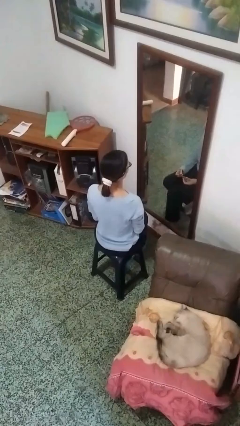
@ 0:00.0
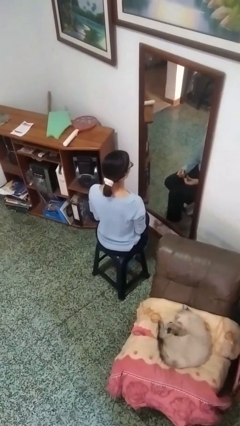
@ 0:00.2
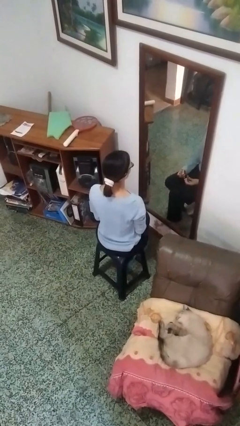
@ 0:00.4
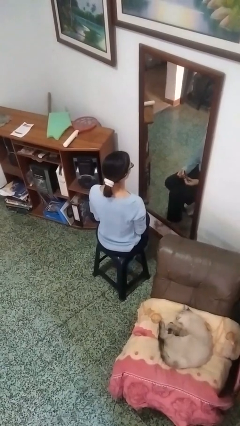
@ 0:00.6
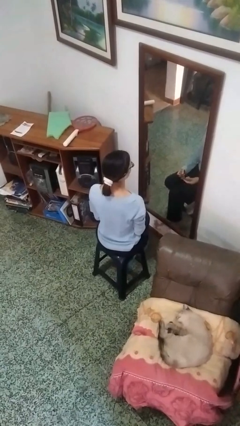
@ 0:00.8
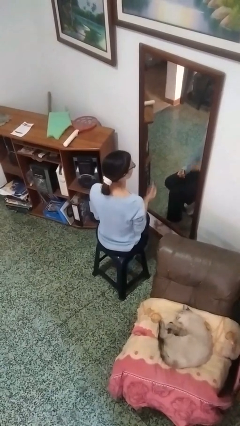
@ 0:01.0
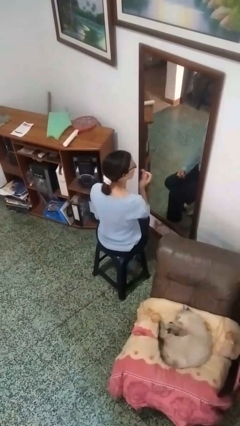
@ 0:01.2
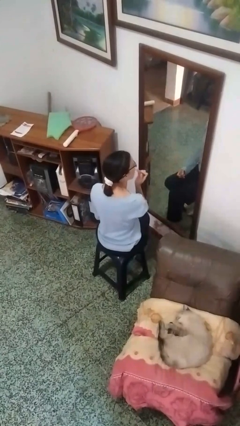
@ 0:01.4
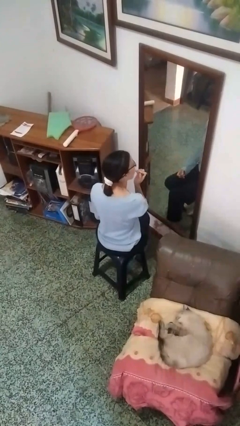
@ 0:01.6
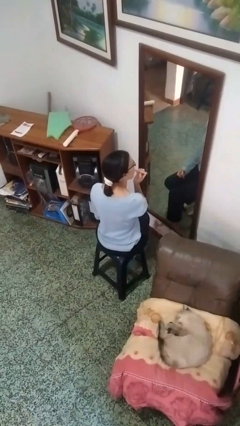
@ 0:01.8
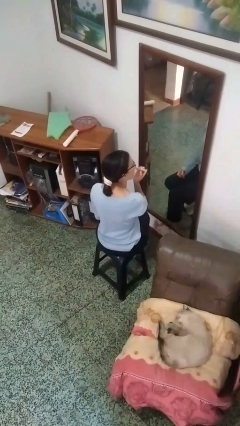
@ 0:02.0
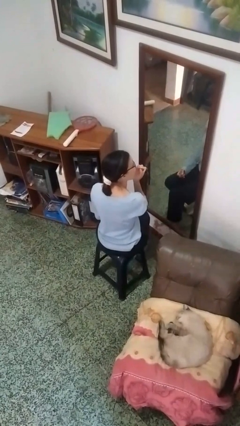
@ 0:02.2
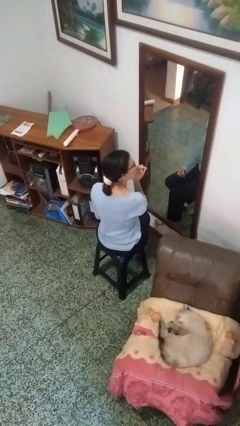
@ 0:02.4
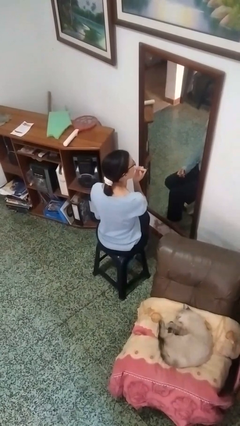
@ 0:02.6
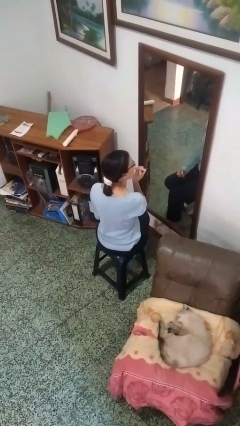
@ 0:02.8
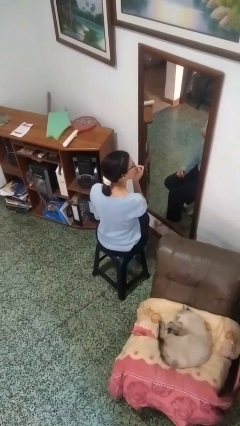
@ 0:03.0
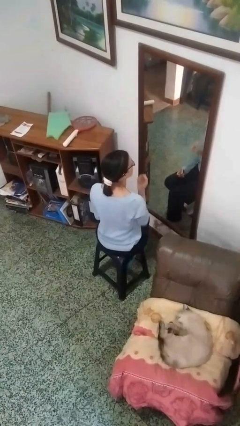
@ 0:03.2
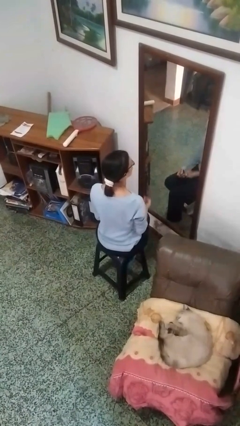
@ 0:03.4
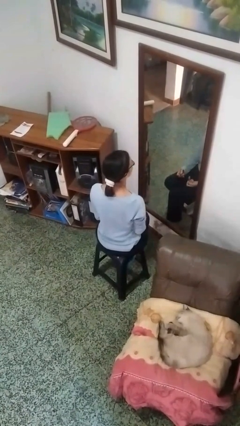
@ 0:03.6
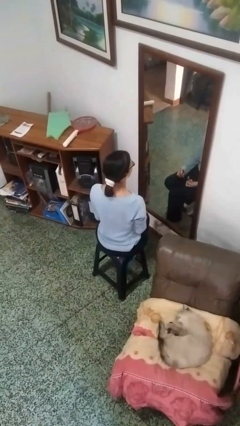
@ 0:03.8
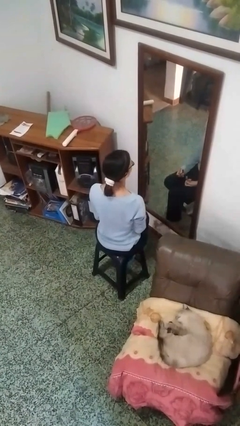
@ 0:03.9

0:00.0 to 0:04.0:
person applies lip makeup

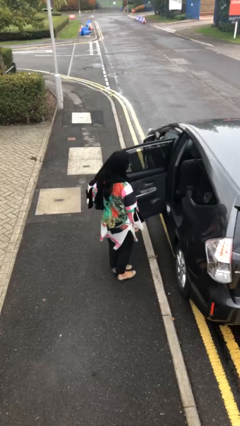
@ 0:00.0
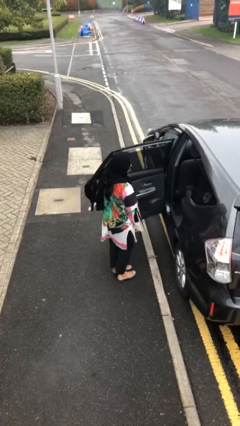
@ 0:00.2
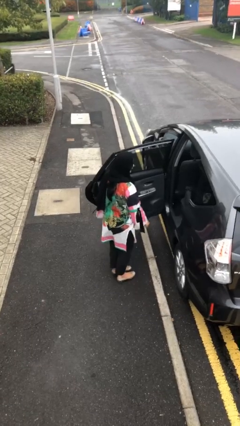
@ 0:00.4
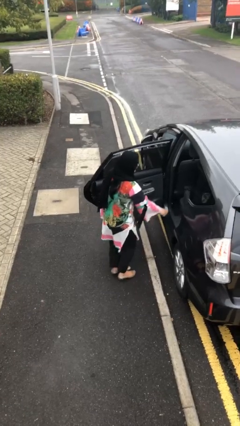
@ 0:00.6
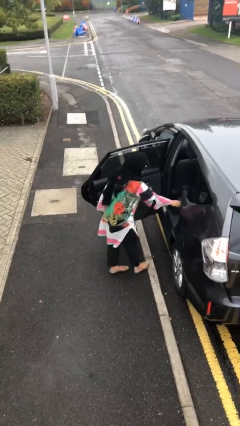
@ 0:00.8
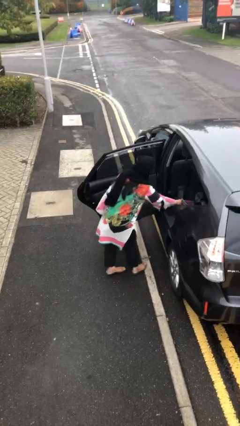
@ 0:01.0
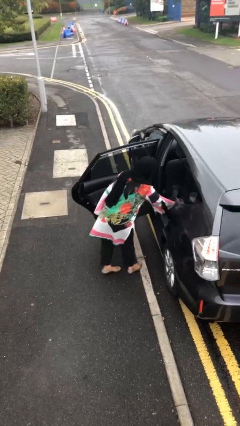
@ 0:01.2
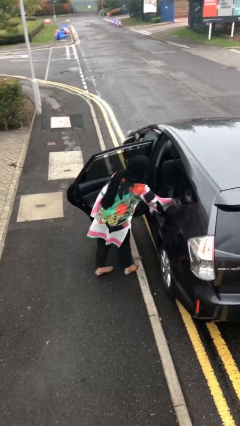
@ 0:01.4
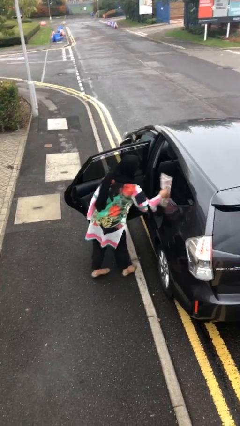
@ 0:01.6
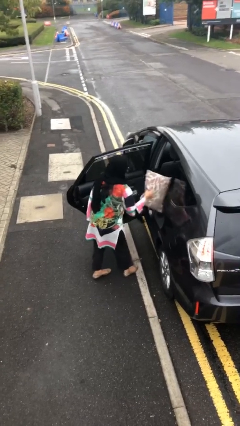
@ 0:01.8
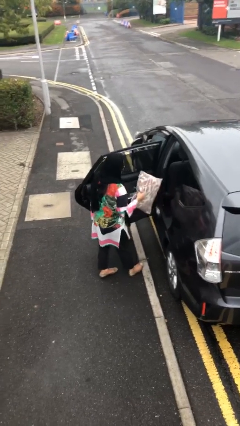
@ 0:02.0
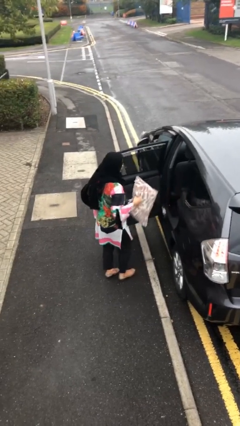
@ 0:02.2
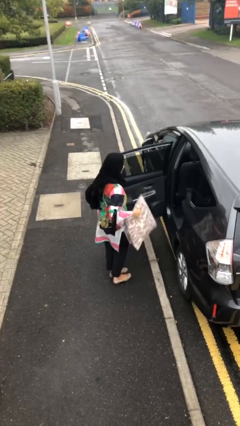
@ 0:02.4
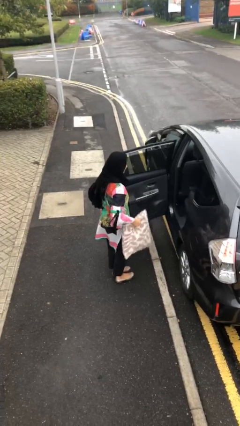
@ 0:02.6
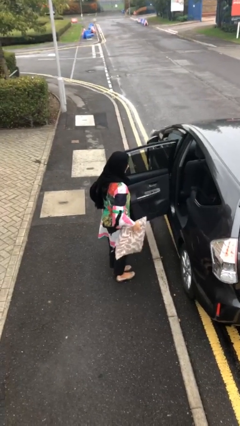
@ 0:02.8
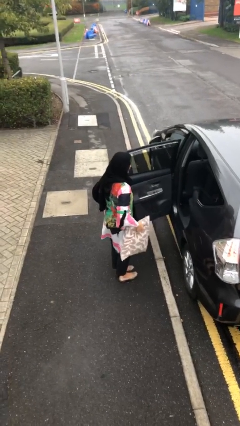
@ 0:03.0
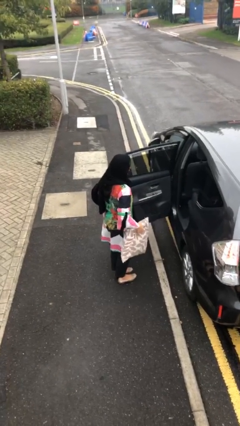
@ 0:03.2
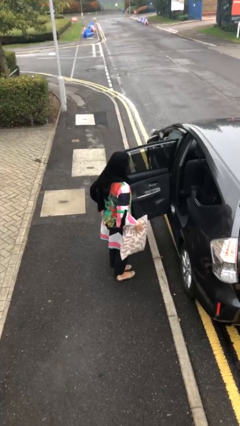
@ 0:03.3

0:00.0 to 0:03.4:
person unloads car

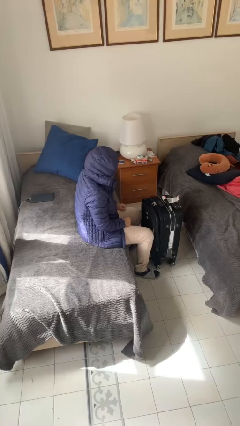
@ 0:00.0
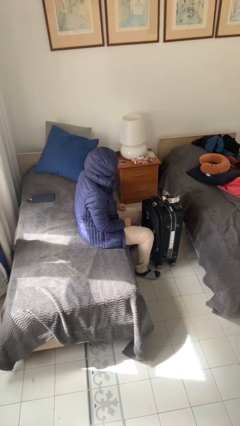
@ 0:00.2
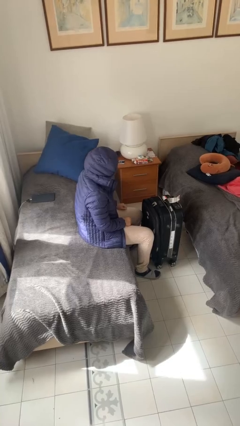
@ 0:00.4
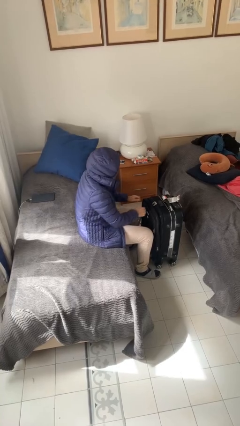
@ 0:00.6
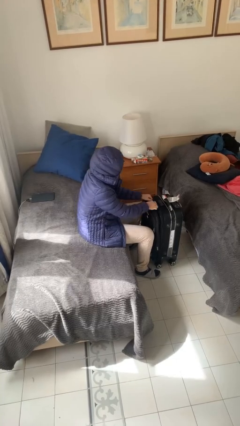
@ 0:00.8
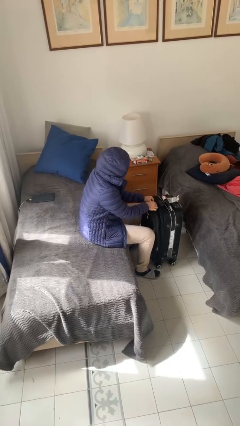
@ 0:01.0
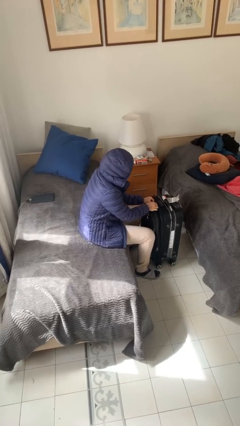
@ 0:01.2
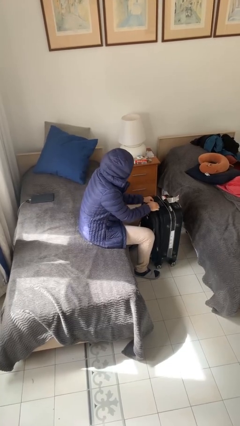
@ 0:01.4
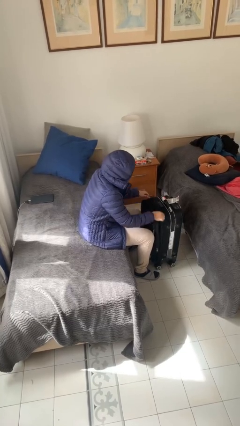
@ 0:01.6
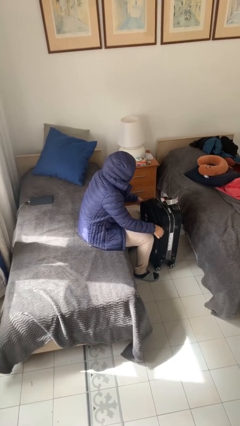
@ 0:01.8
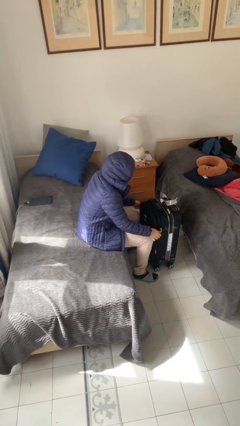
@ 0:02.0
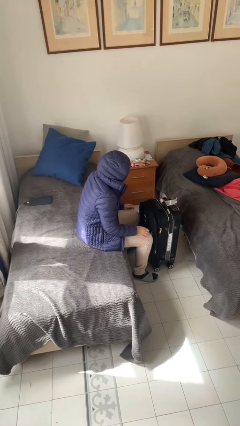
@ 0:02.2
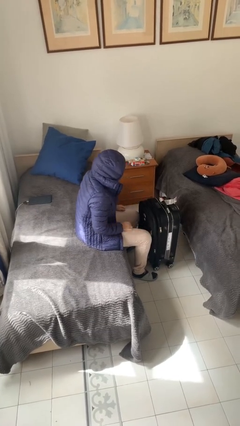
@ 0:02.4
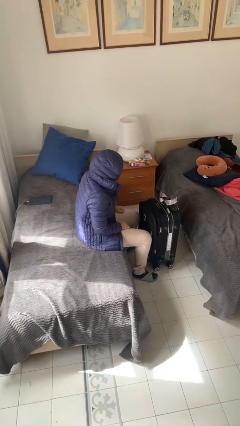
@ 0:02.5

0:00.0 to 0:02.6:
person opens suitcase

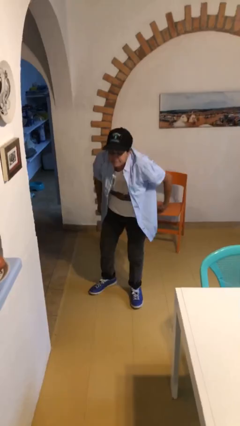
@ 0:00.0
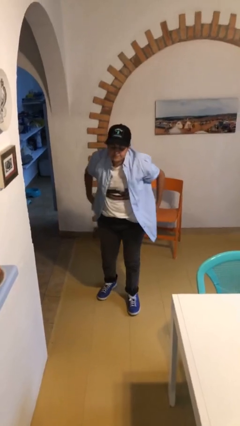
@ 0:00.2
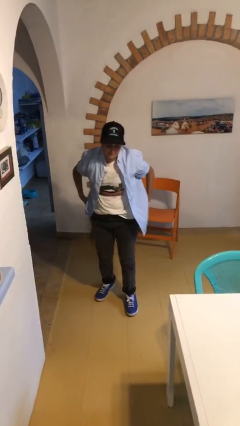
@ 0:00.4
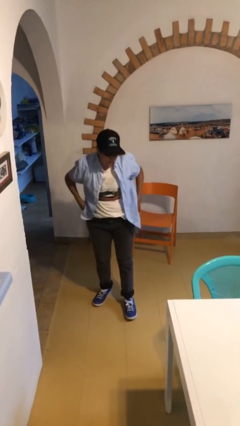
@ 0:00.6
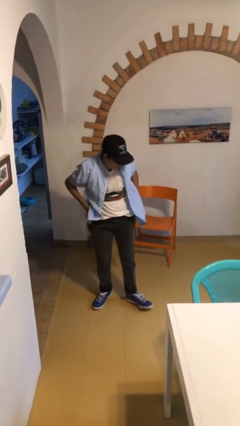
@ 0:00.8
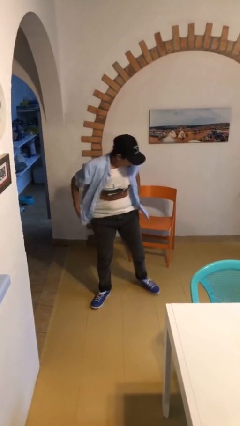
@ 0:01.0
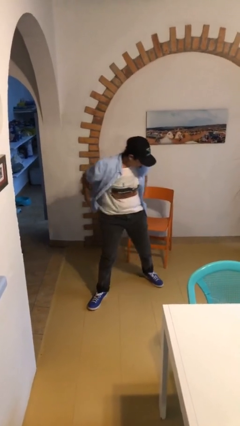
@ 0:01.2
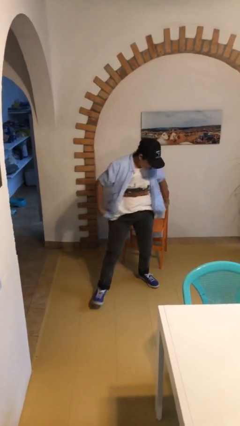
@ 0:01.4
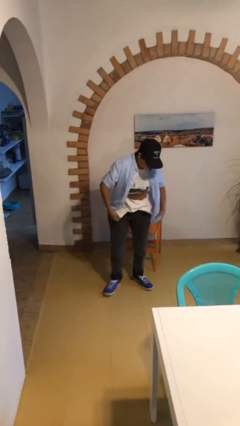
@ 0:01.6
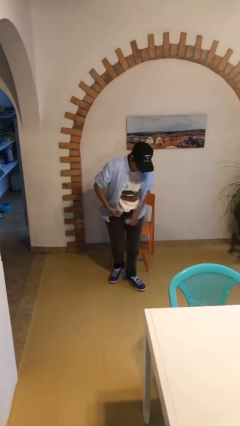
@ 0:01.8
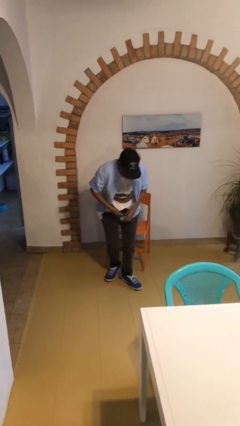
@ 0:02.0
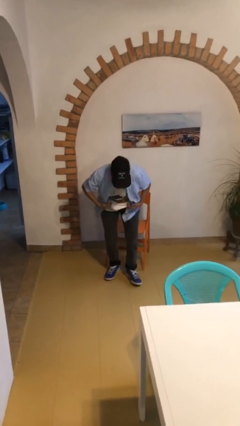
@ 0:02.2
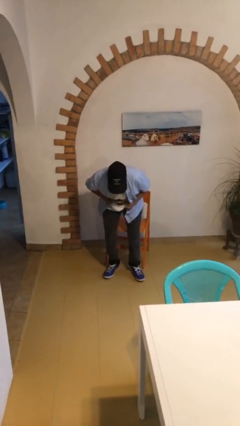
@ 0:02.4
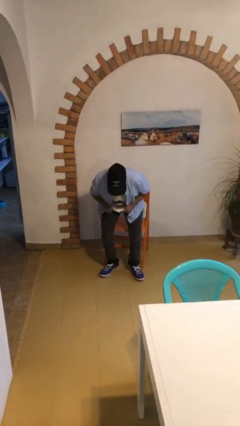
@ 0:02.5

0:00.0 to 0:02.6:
person stands up from floor

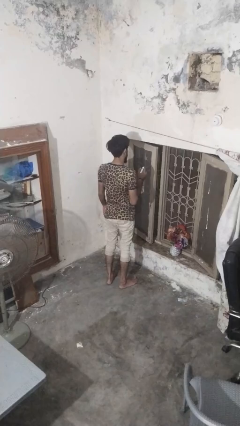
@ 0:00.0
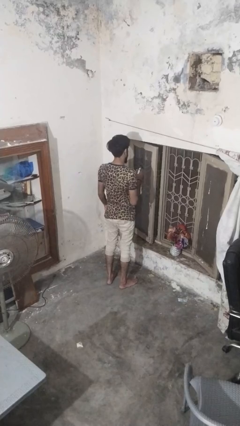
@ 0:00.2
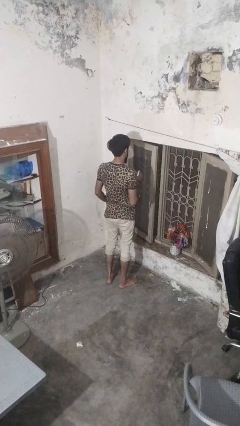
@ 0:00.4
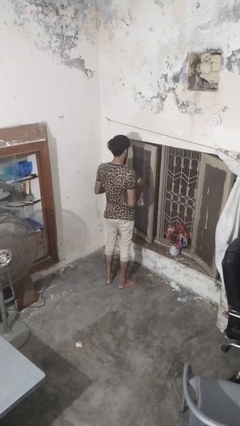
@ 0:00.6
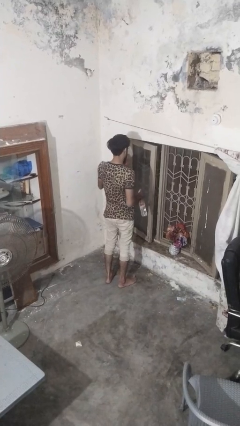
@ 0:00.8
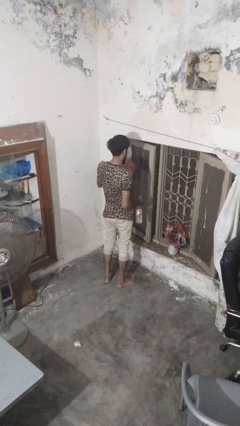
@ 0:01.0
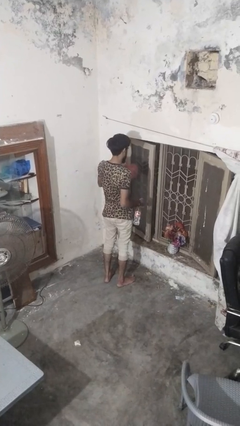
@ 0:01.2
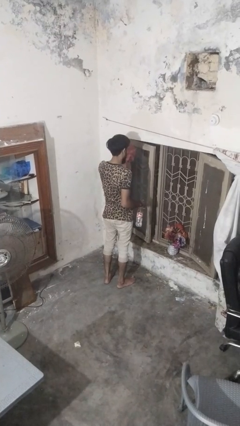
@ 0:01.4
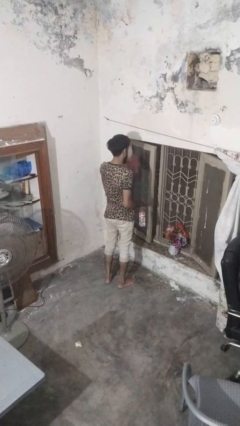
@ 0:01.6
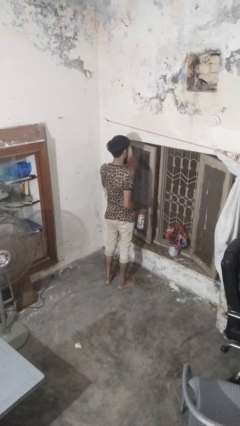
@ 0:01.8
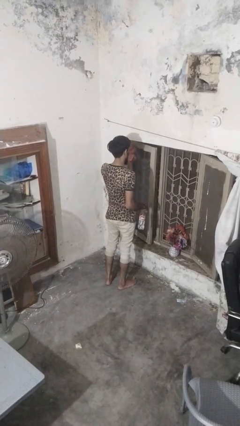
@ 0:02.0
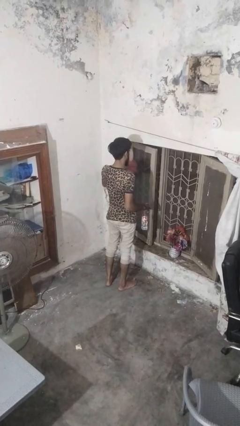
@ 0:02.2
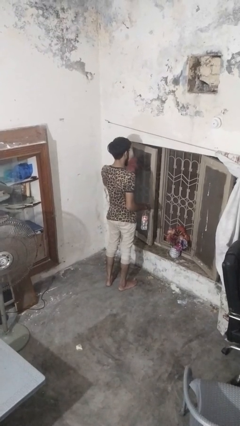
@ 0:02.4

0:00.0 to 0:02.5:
person washes window

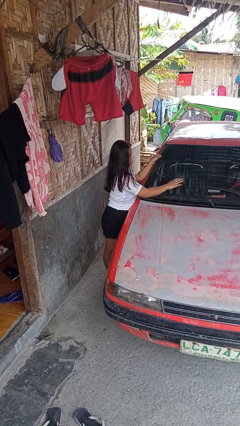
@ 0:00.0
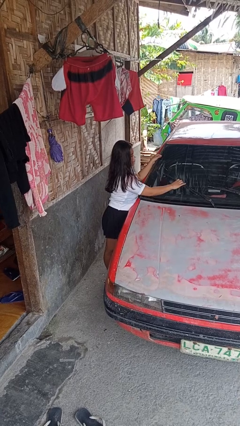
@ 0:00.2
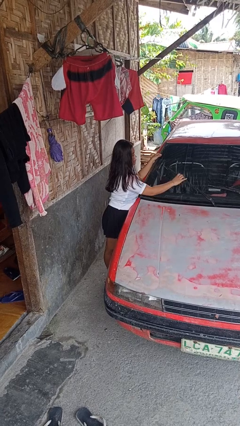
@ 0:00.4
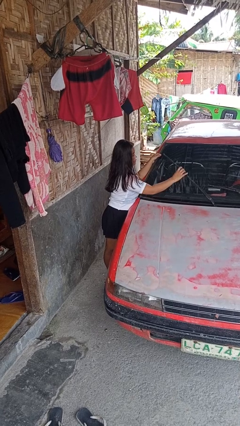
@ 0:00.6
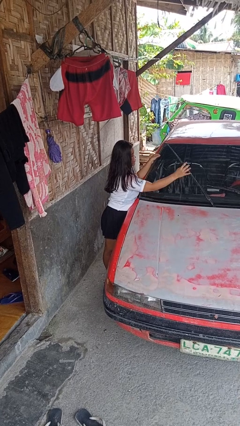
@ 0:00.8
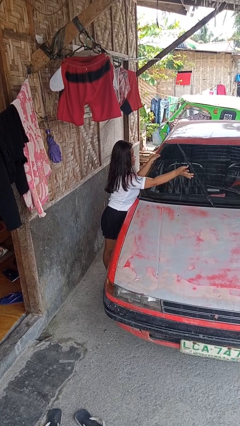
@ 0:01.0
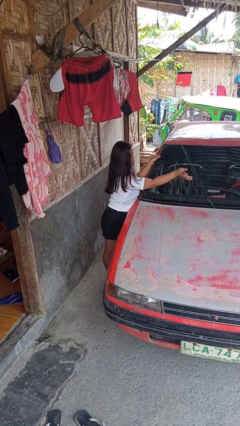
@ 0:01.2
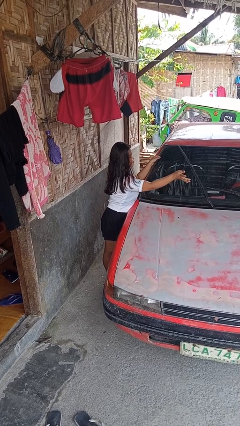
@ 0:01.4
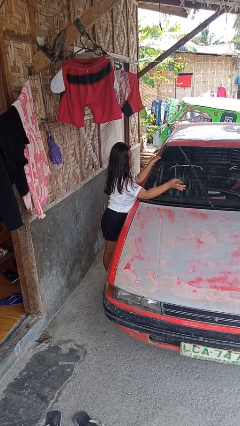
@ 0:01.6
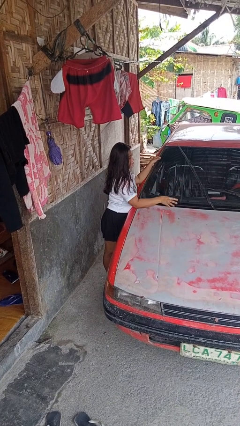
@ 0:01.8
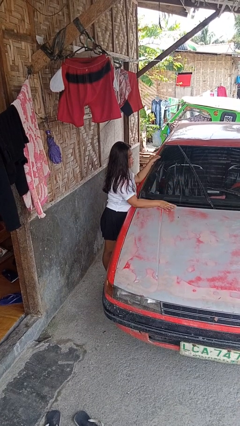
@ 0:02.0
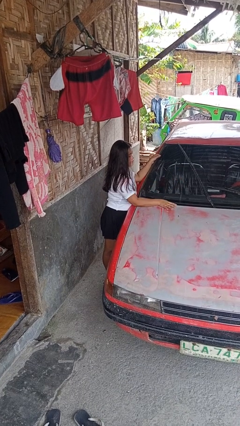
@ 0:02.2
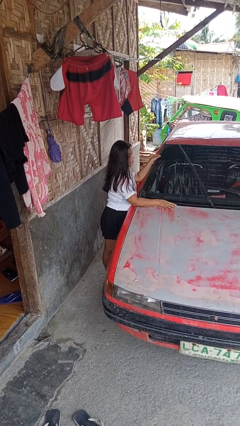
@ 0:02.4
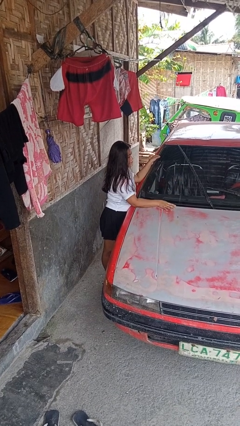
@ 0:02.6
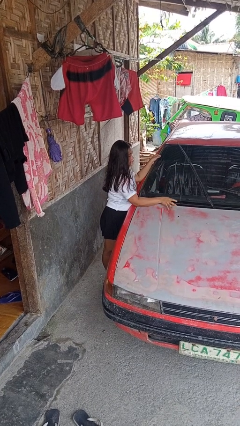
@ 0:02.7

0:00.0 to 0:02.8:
person flips up car wipers
